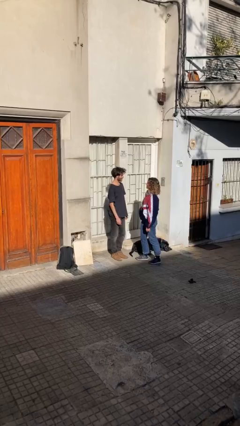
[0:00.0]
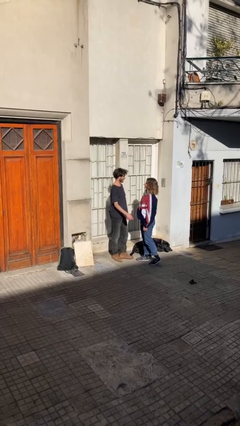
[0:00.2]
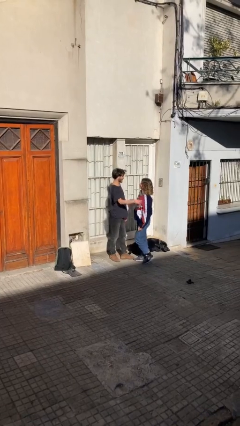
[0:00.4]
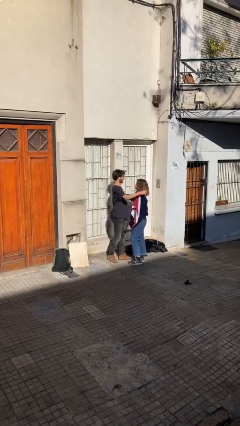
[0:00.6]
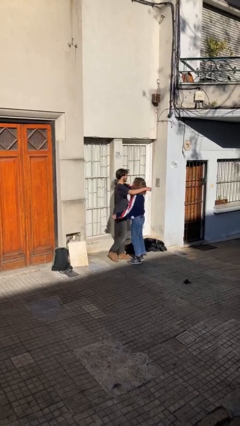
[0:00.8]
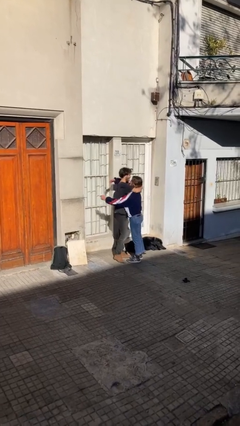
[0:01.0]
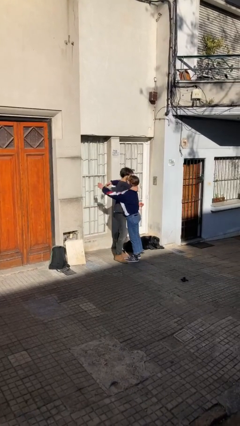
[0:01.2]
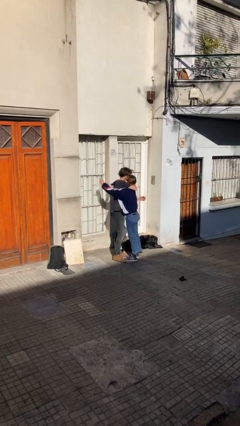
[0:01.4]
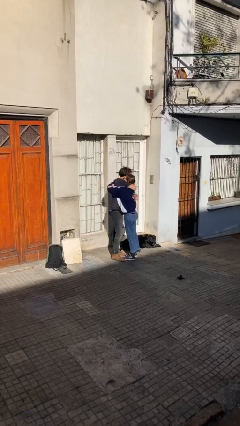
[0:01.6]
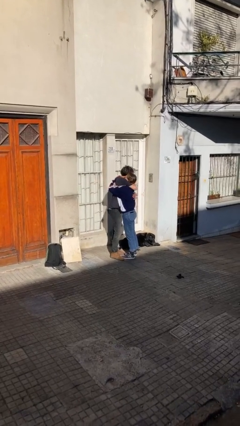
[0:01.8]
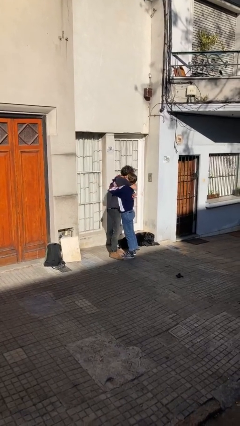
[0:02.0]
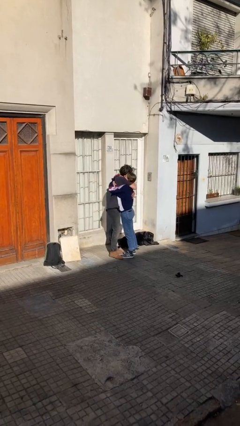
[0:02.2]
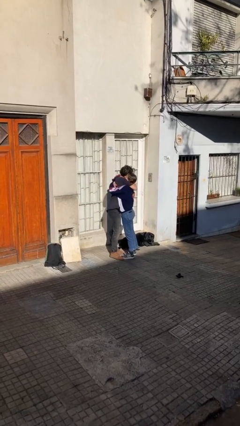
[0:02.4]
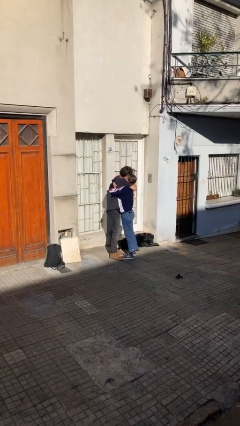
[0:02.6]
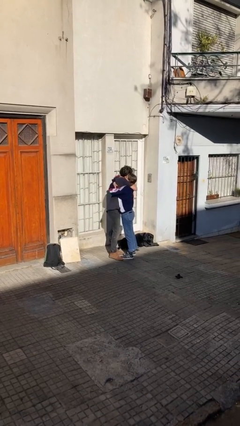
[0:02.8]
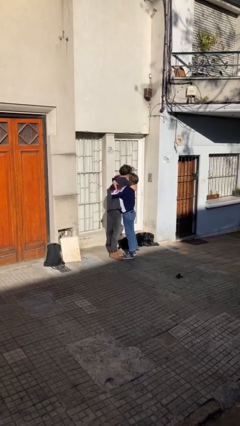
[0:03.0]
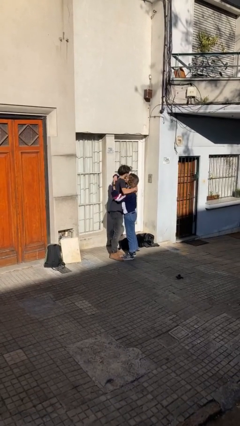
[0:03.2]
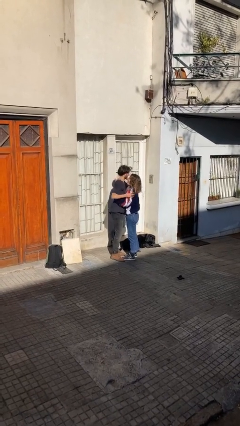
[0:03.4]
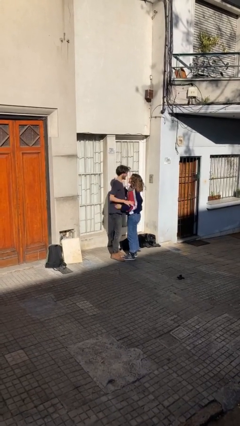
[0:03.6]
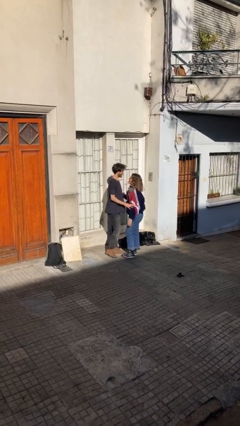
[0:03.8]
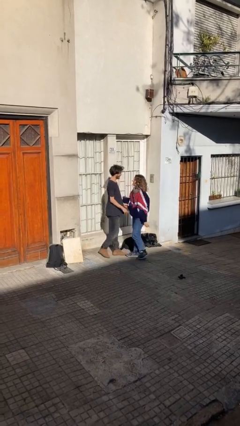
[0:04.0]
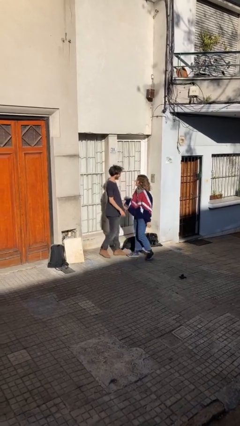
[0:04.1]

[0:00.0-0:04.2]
person embraces person

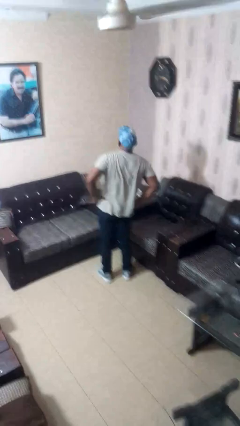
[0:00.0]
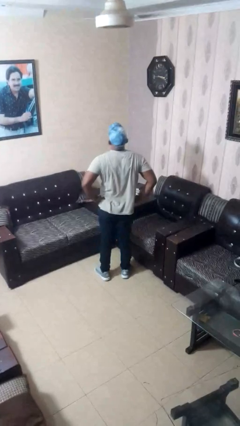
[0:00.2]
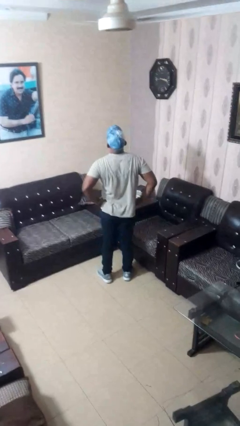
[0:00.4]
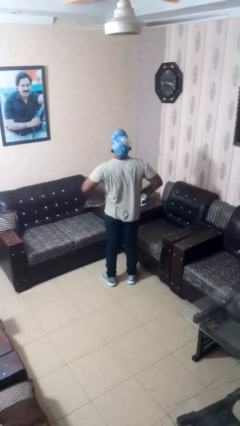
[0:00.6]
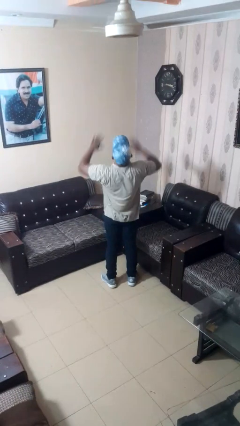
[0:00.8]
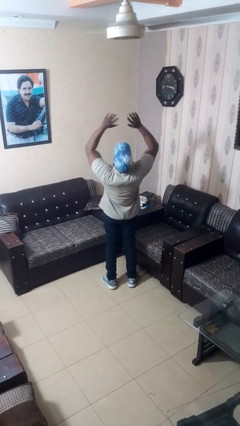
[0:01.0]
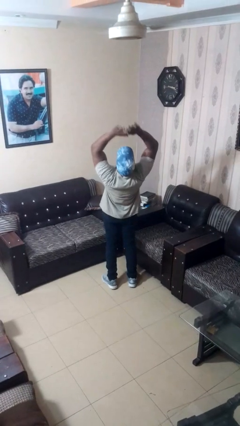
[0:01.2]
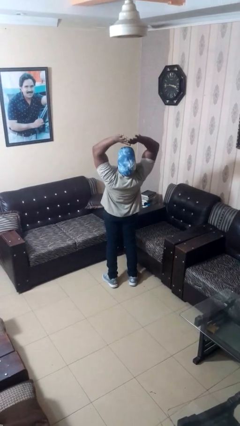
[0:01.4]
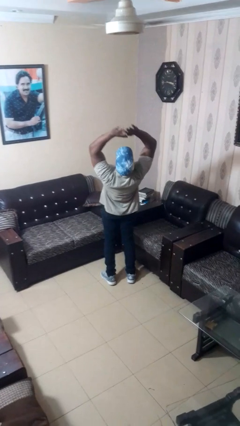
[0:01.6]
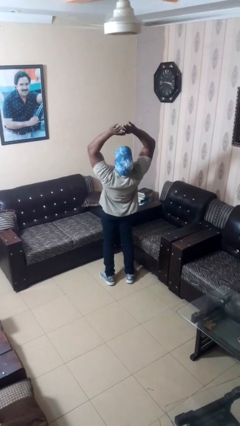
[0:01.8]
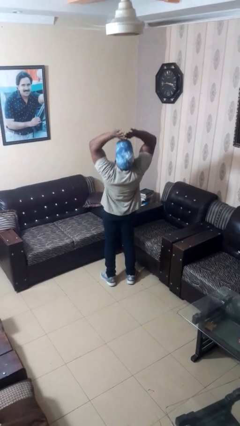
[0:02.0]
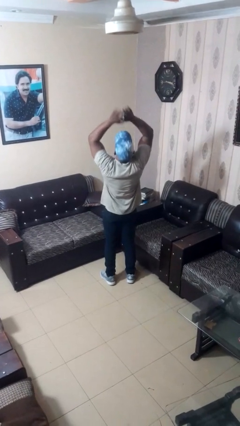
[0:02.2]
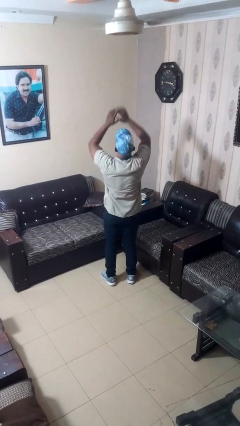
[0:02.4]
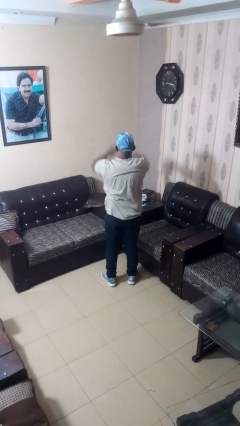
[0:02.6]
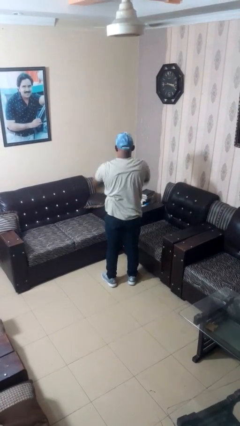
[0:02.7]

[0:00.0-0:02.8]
person stretches arms over head

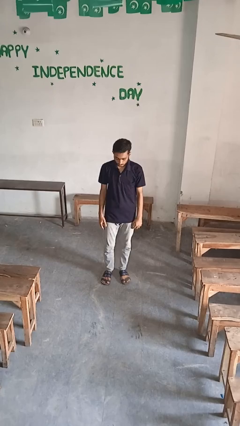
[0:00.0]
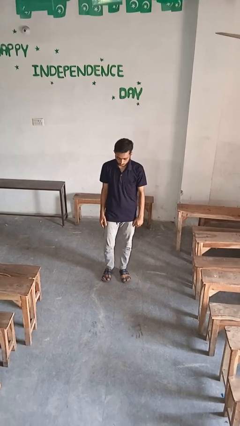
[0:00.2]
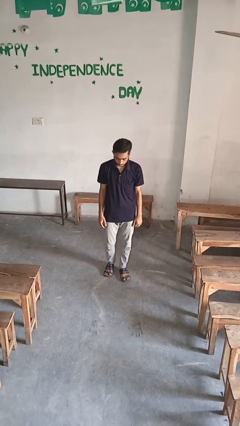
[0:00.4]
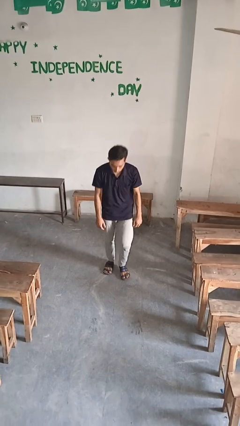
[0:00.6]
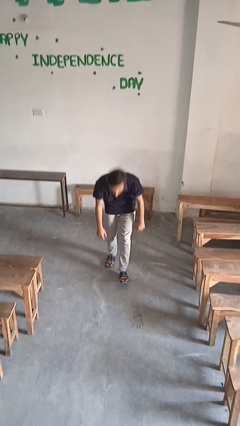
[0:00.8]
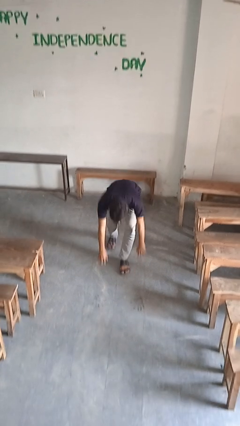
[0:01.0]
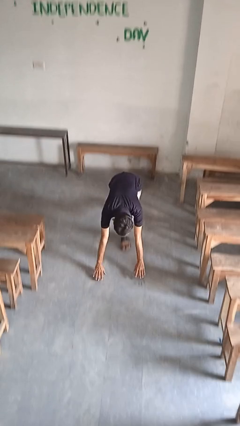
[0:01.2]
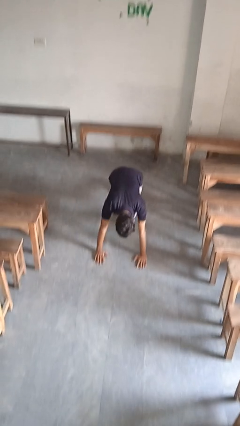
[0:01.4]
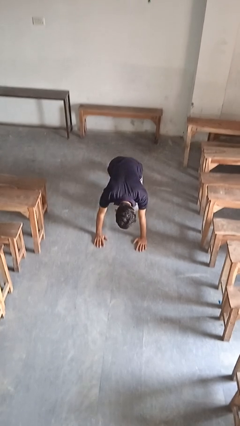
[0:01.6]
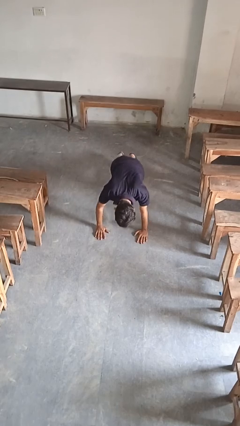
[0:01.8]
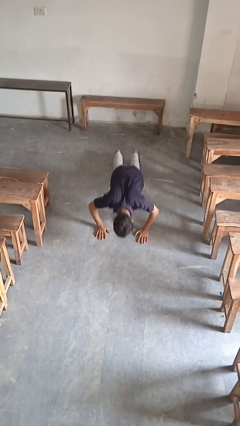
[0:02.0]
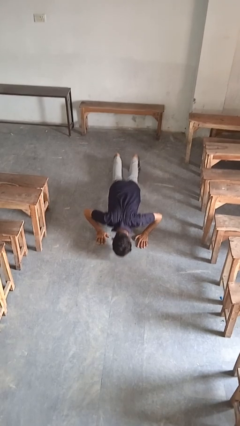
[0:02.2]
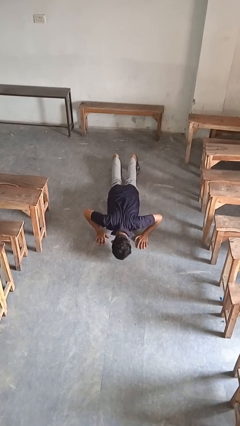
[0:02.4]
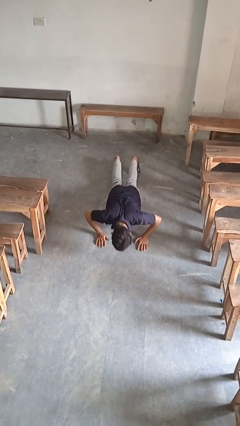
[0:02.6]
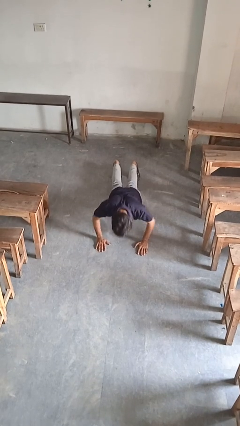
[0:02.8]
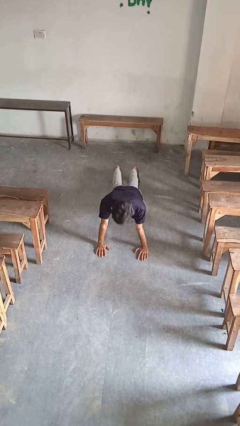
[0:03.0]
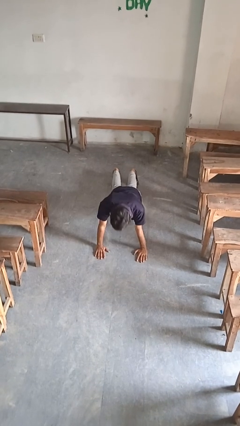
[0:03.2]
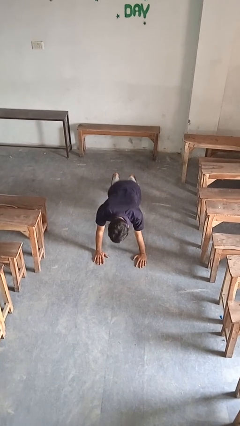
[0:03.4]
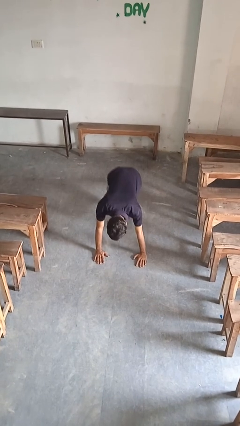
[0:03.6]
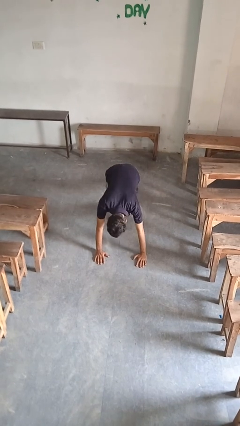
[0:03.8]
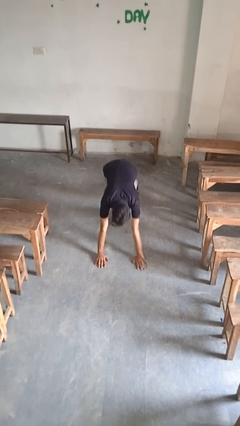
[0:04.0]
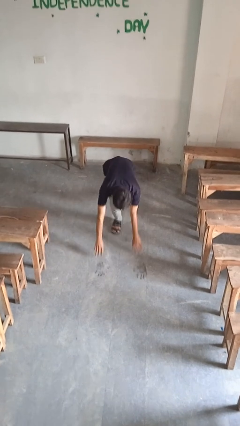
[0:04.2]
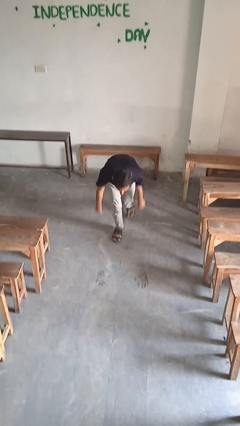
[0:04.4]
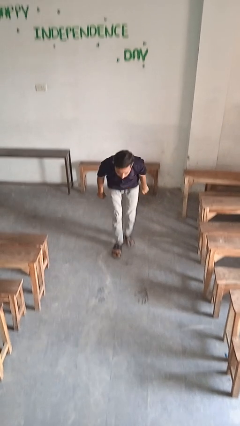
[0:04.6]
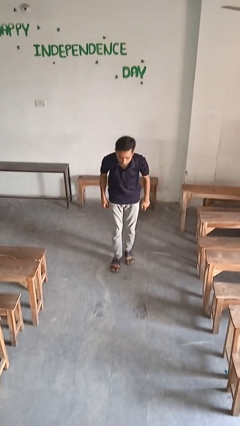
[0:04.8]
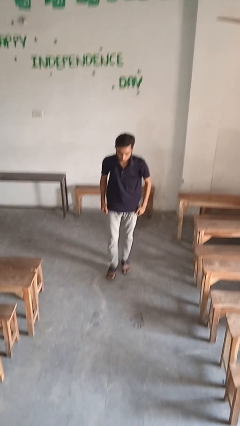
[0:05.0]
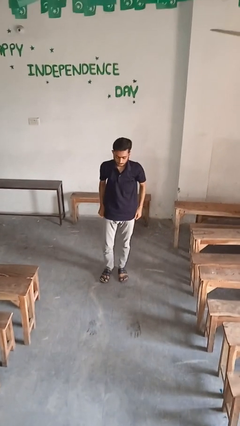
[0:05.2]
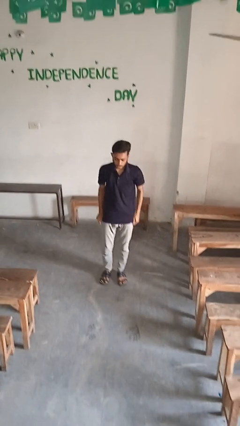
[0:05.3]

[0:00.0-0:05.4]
person exercises with pushup

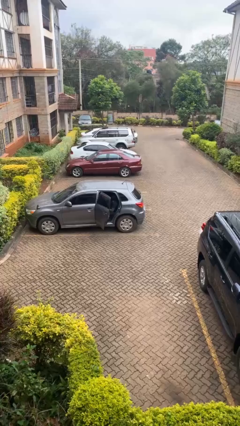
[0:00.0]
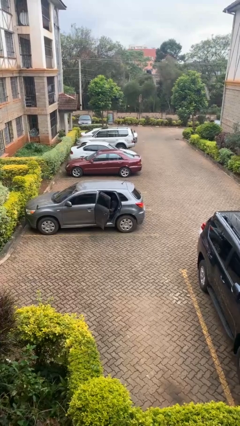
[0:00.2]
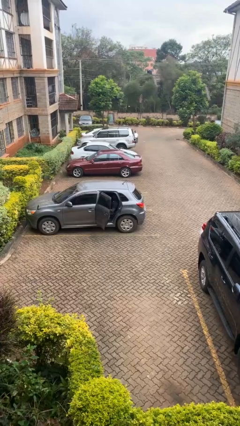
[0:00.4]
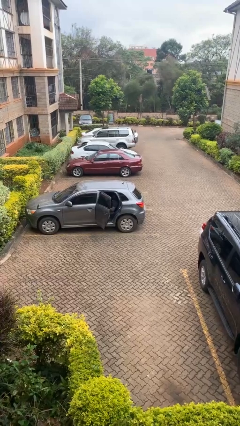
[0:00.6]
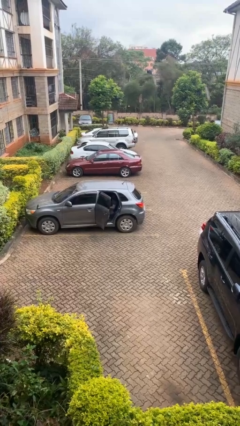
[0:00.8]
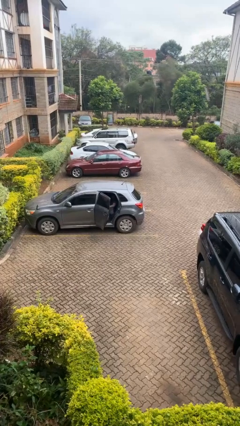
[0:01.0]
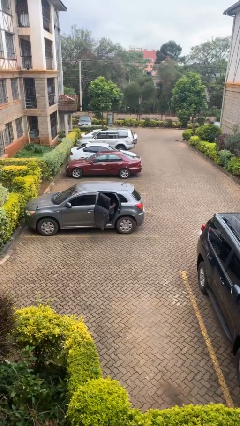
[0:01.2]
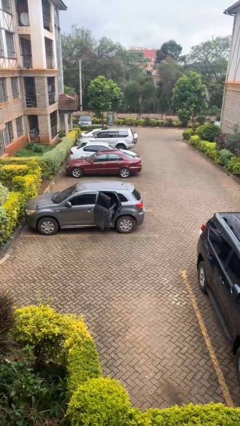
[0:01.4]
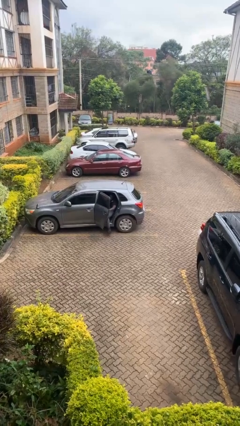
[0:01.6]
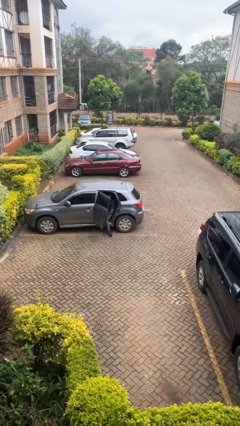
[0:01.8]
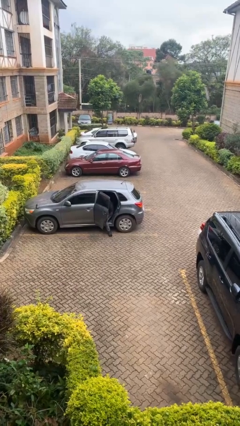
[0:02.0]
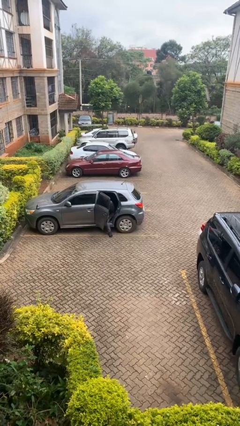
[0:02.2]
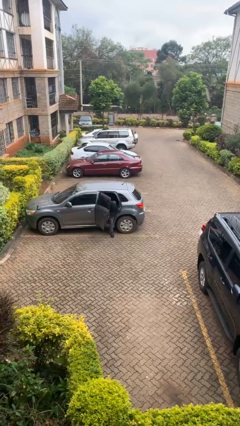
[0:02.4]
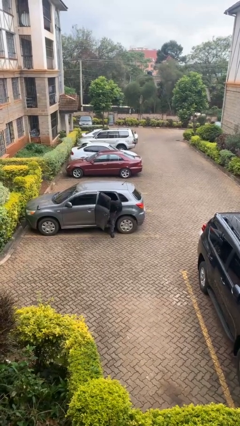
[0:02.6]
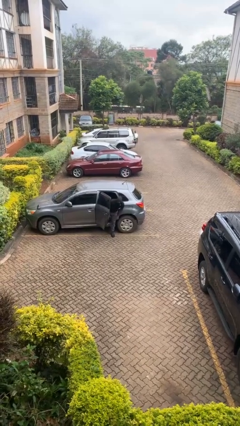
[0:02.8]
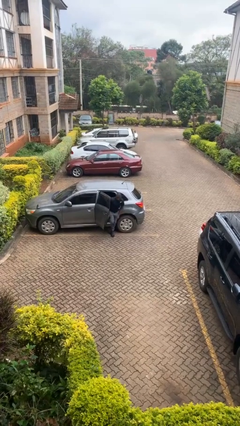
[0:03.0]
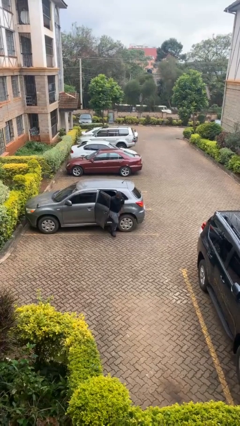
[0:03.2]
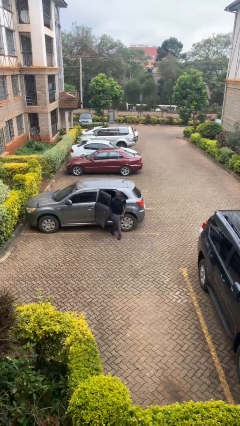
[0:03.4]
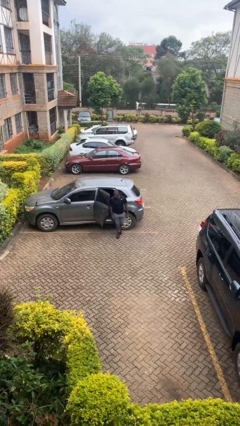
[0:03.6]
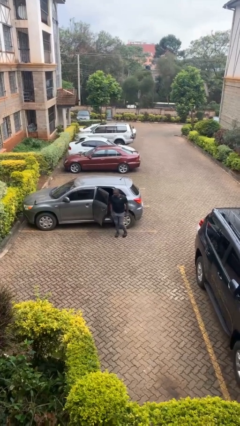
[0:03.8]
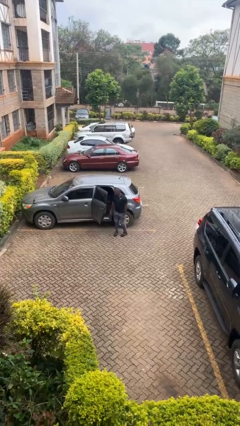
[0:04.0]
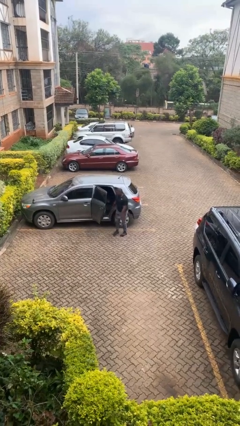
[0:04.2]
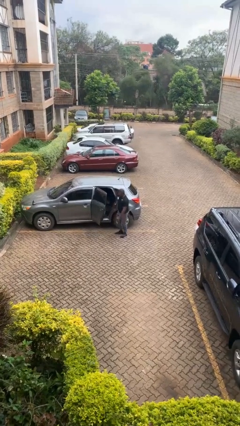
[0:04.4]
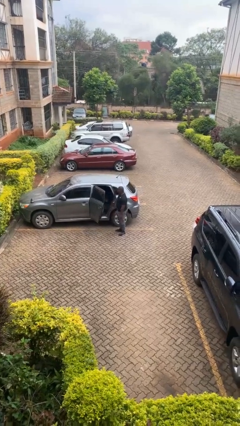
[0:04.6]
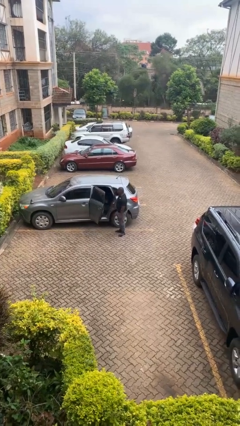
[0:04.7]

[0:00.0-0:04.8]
person exits car

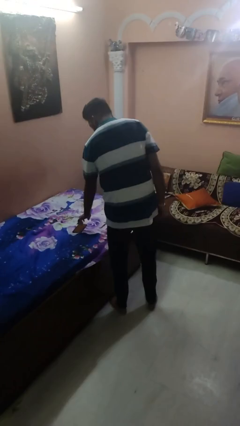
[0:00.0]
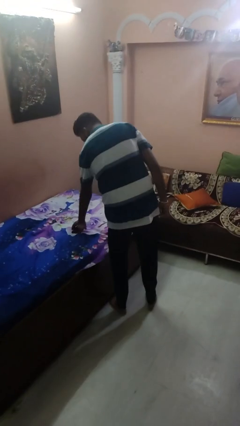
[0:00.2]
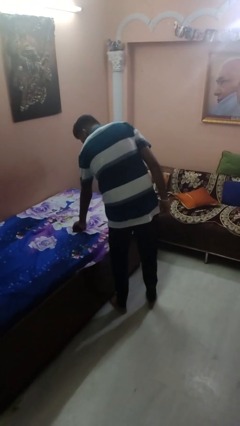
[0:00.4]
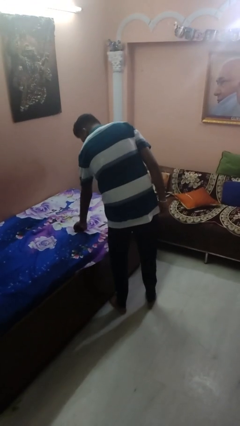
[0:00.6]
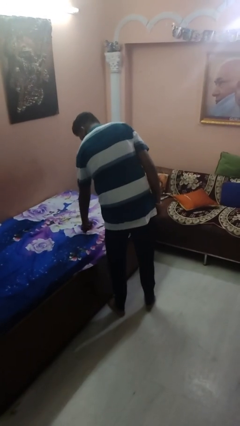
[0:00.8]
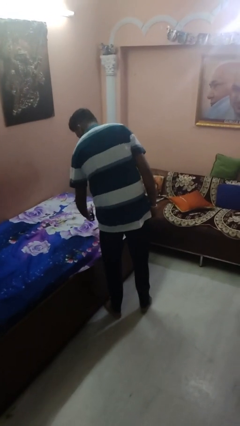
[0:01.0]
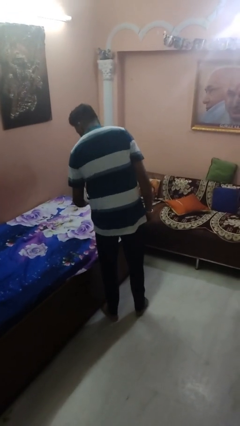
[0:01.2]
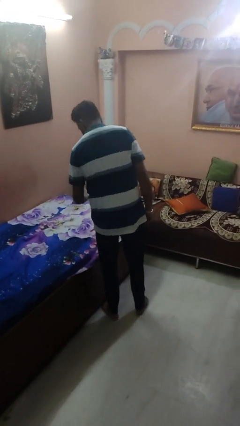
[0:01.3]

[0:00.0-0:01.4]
person picks up object from bed
